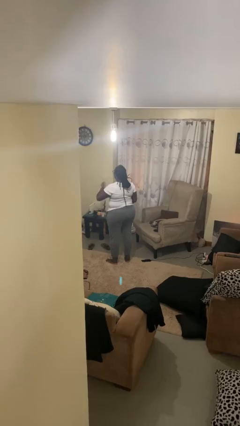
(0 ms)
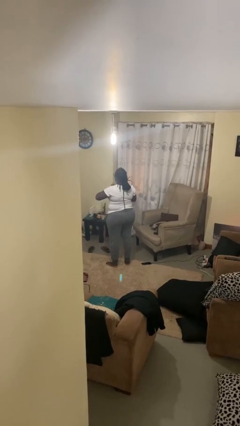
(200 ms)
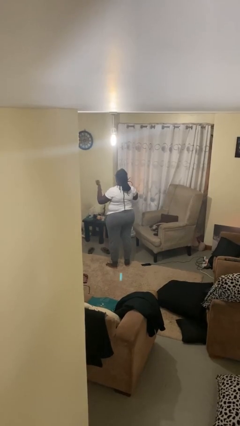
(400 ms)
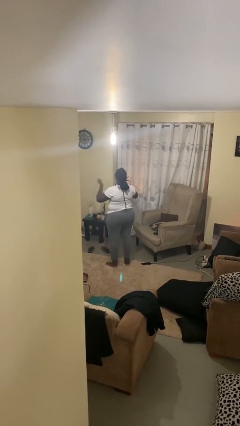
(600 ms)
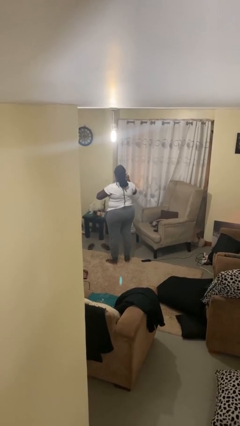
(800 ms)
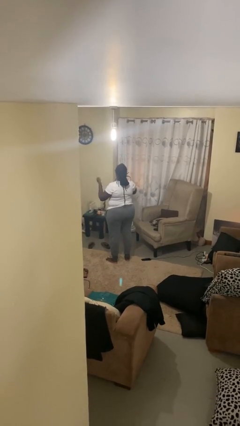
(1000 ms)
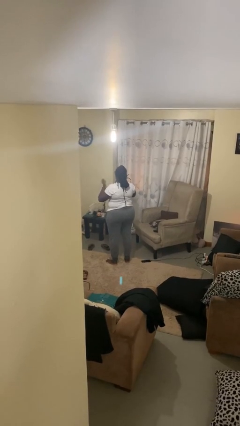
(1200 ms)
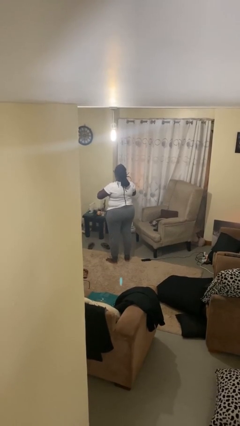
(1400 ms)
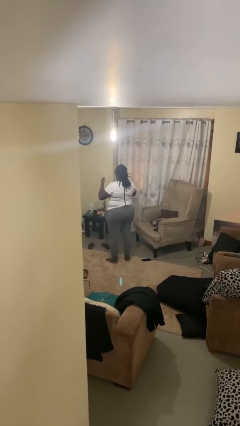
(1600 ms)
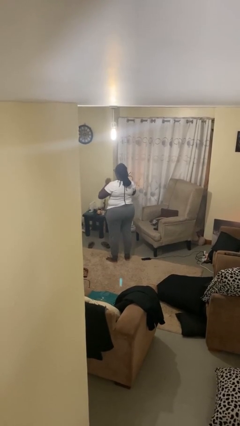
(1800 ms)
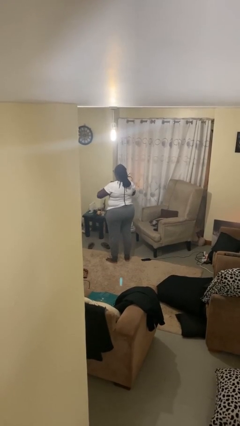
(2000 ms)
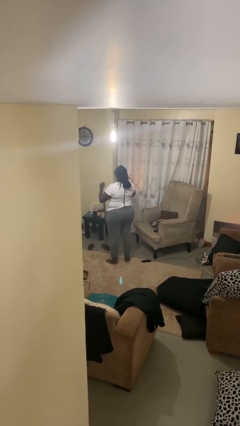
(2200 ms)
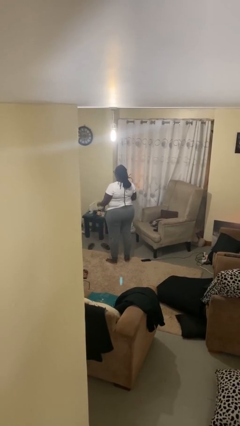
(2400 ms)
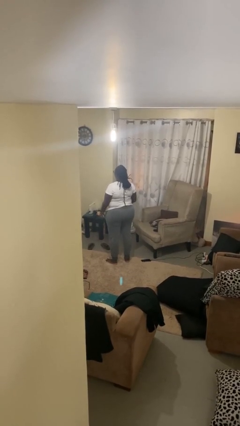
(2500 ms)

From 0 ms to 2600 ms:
person drums on chest

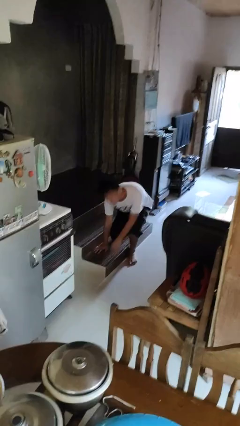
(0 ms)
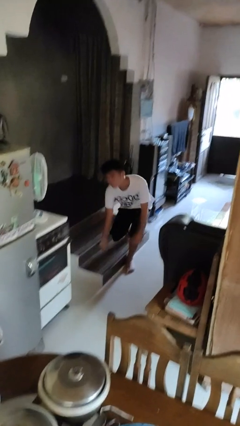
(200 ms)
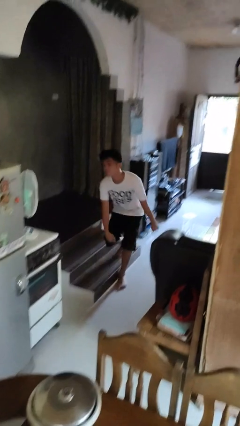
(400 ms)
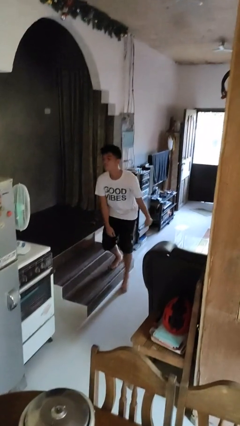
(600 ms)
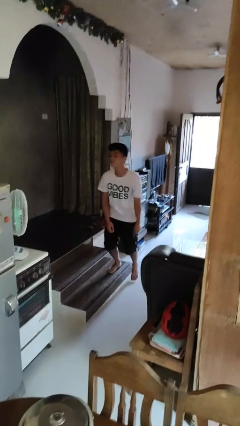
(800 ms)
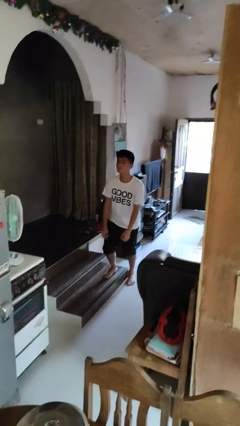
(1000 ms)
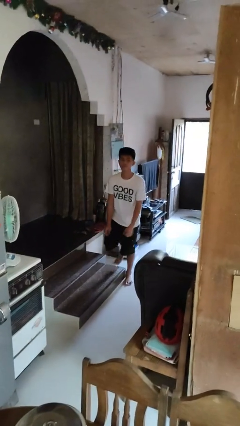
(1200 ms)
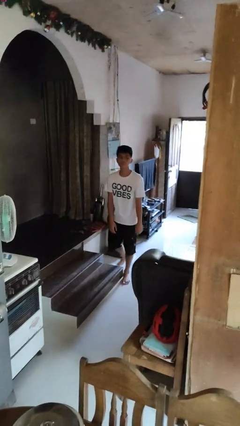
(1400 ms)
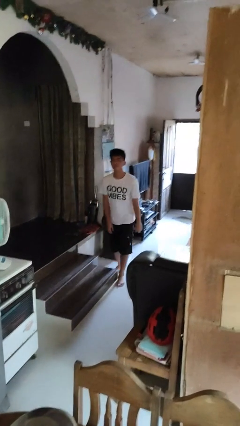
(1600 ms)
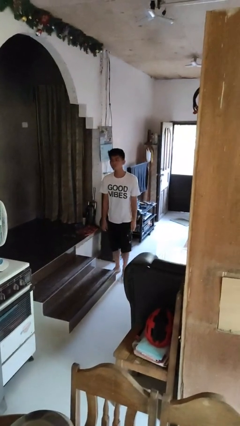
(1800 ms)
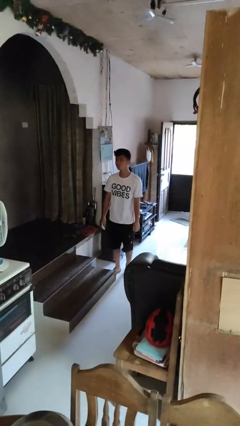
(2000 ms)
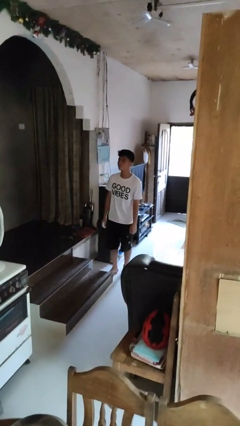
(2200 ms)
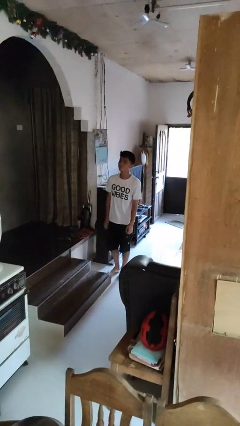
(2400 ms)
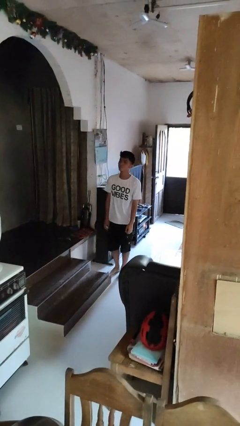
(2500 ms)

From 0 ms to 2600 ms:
person stands up from floor

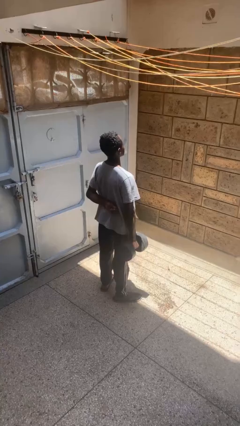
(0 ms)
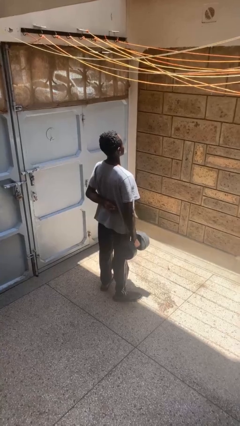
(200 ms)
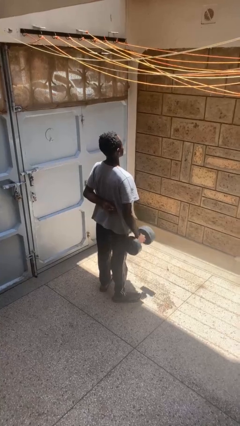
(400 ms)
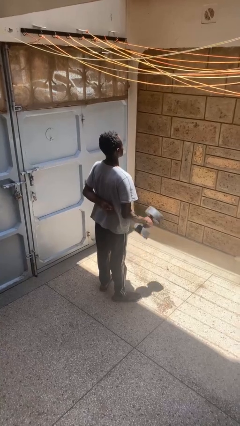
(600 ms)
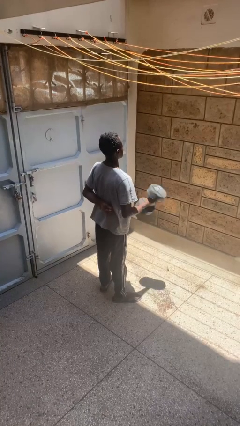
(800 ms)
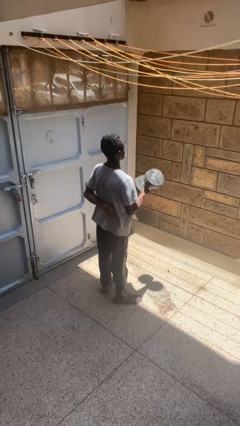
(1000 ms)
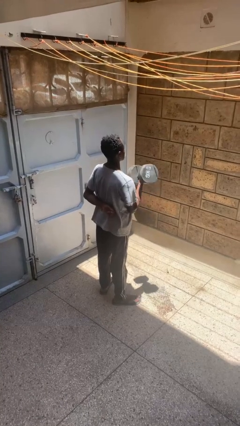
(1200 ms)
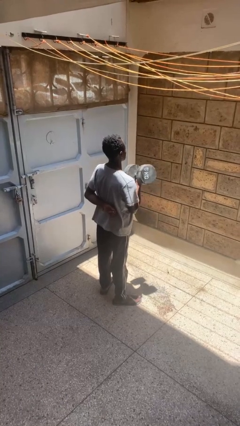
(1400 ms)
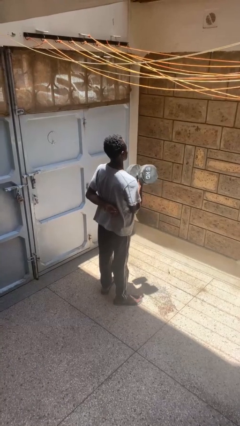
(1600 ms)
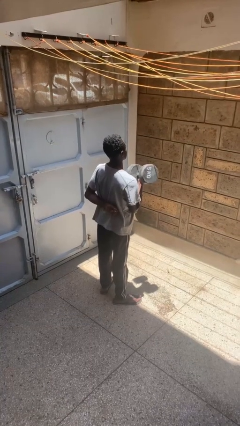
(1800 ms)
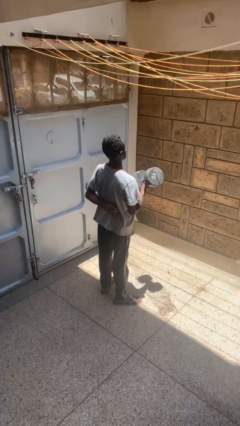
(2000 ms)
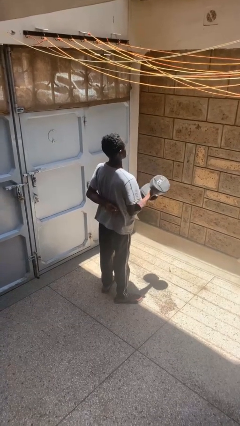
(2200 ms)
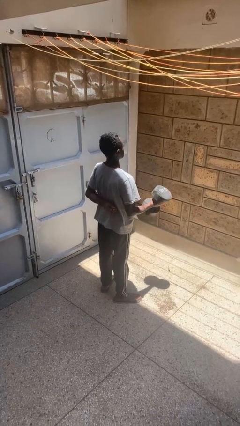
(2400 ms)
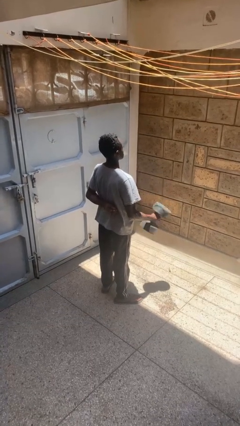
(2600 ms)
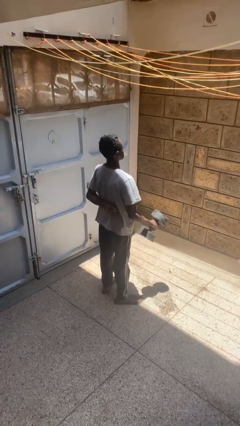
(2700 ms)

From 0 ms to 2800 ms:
person lifts dumbbells

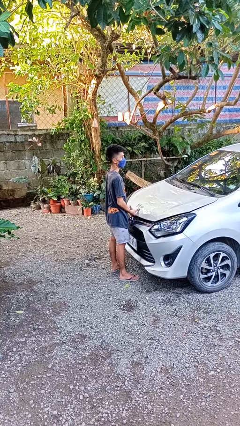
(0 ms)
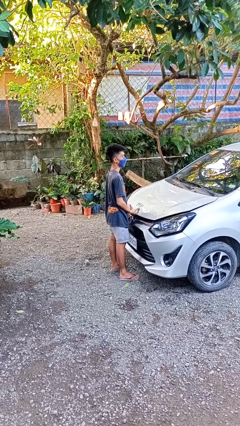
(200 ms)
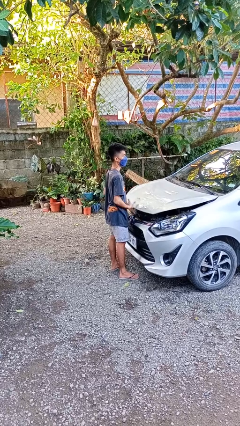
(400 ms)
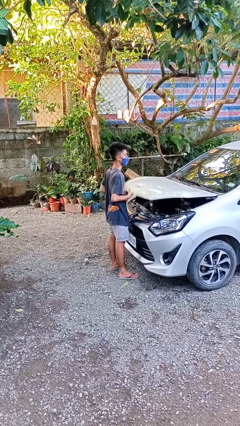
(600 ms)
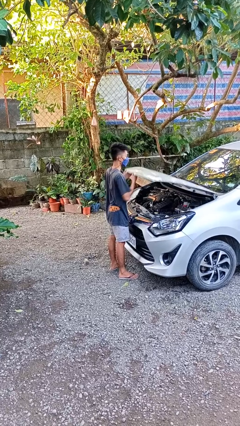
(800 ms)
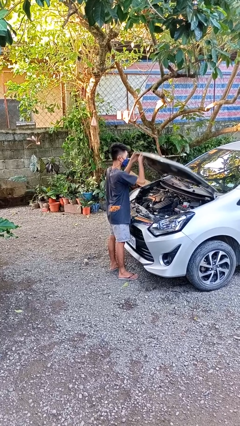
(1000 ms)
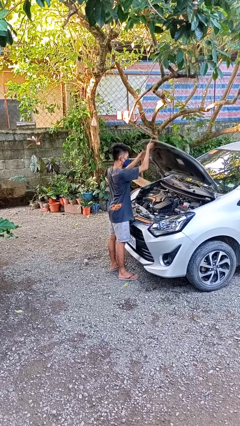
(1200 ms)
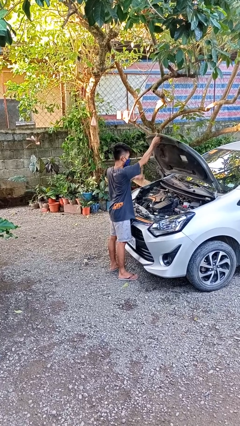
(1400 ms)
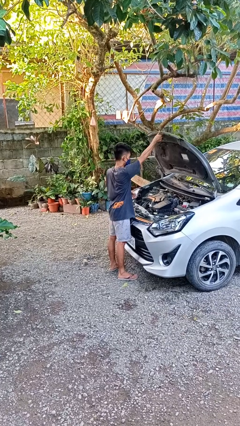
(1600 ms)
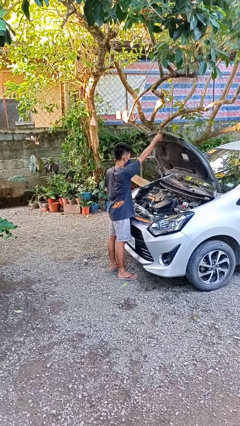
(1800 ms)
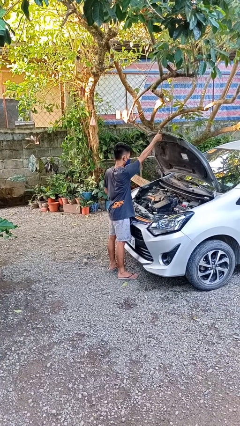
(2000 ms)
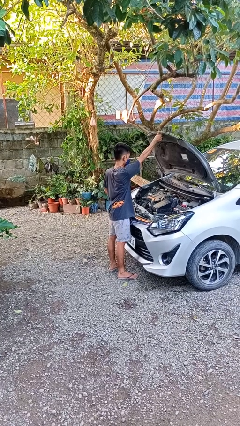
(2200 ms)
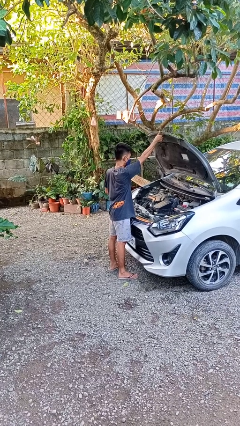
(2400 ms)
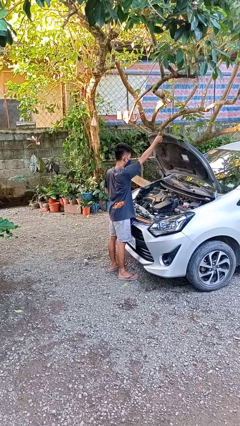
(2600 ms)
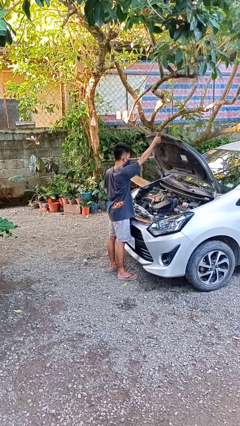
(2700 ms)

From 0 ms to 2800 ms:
person opens car hood

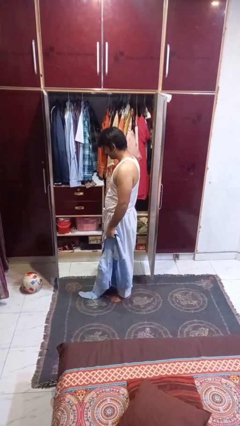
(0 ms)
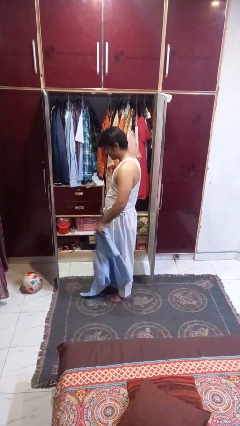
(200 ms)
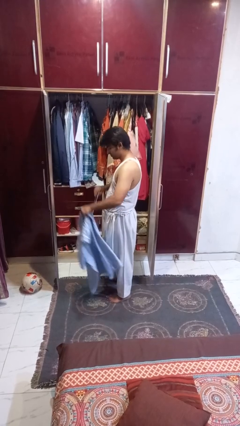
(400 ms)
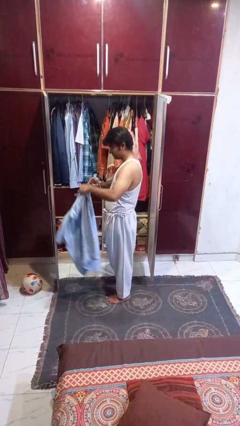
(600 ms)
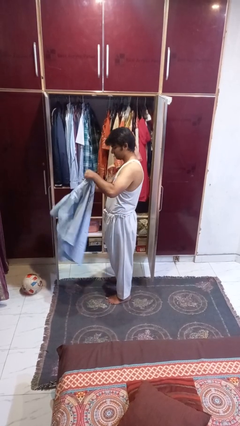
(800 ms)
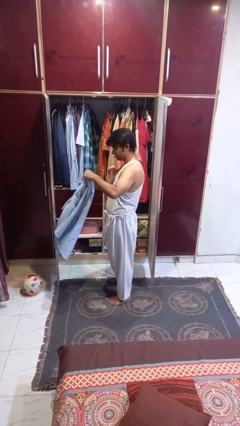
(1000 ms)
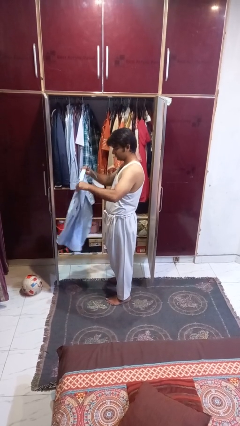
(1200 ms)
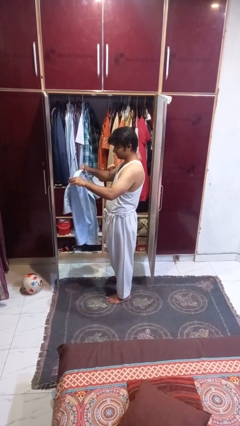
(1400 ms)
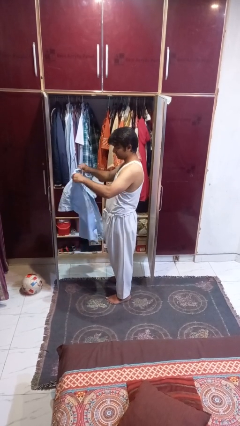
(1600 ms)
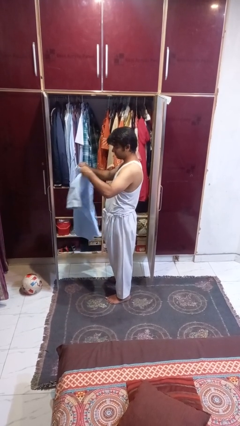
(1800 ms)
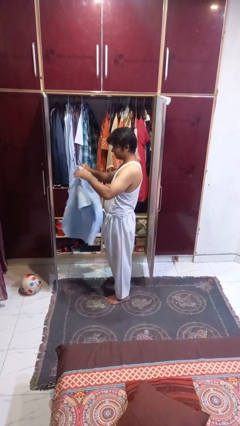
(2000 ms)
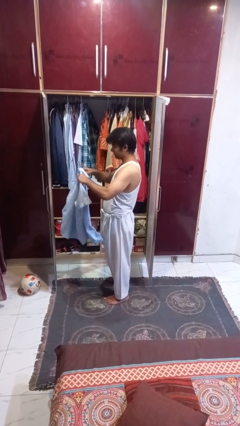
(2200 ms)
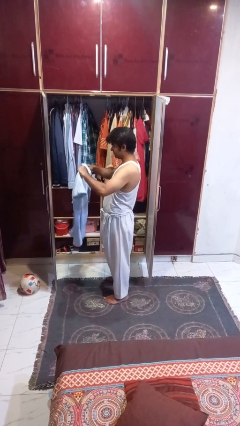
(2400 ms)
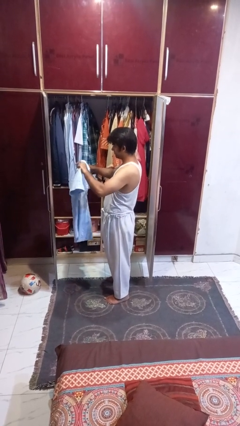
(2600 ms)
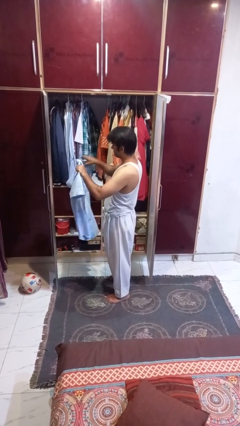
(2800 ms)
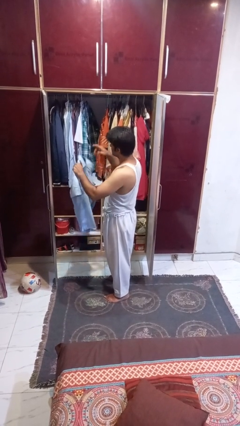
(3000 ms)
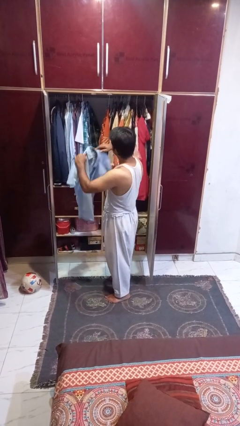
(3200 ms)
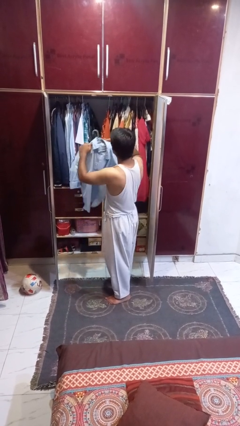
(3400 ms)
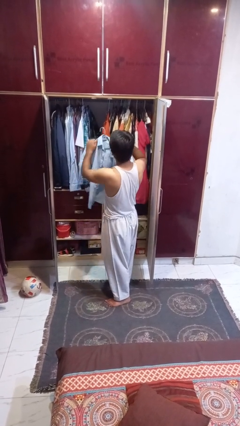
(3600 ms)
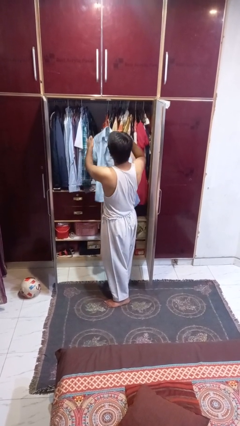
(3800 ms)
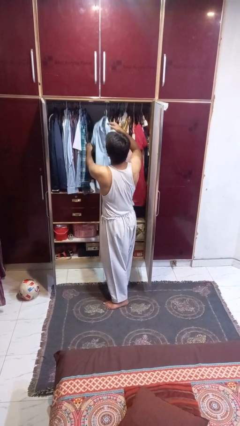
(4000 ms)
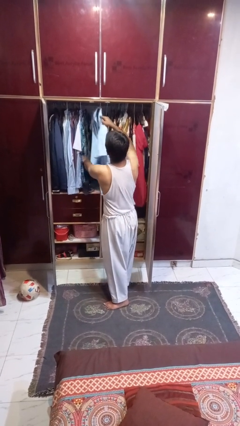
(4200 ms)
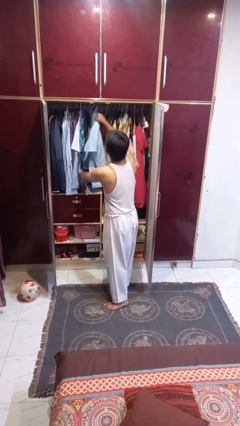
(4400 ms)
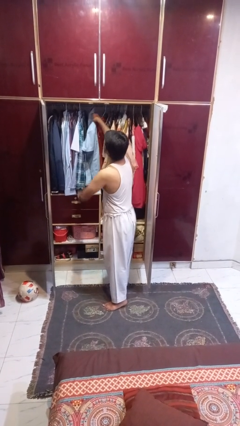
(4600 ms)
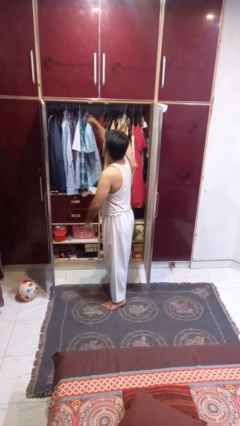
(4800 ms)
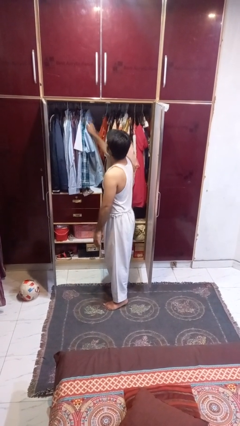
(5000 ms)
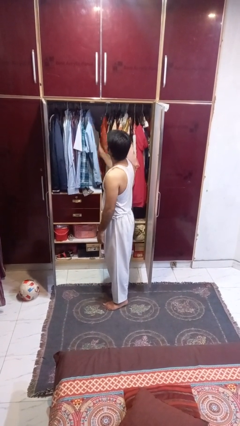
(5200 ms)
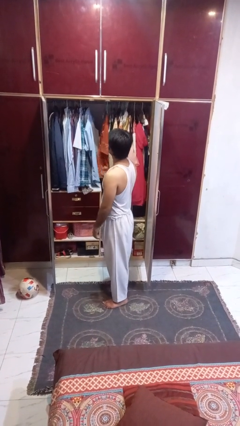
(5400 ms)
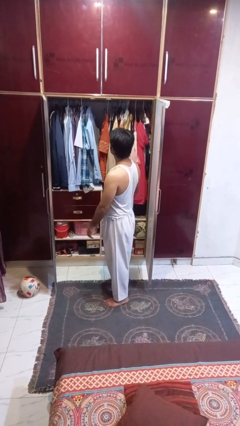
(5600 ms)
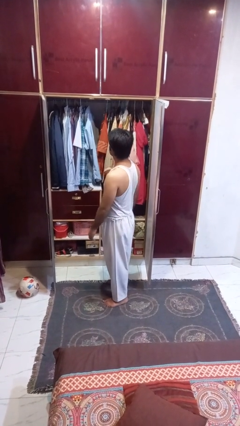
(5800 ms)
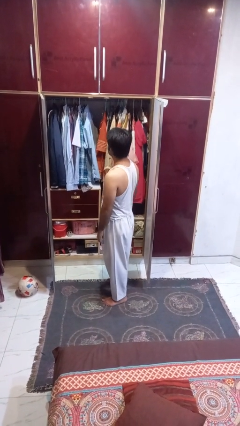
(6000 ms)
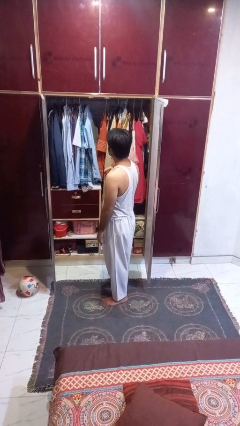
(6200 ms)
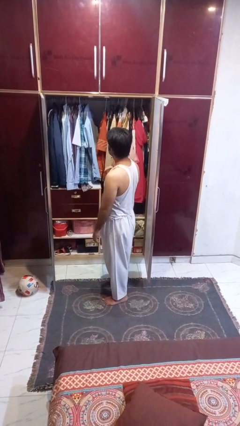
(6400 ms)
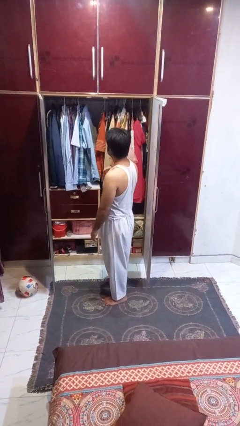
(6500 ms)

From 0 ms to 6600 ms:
person puts clothes into closet
